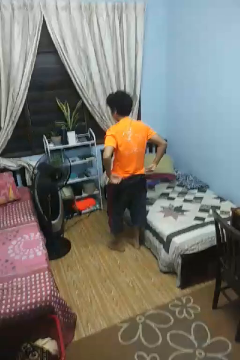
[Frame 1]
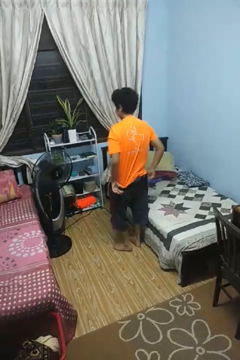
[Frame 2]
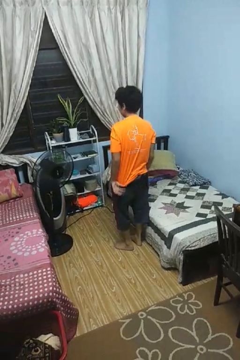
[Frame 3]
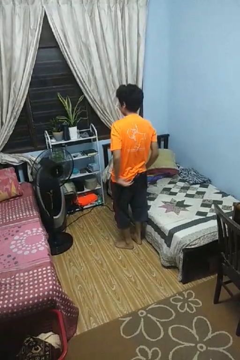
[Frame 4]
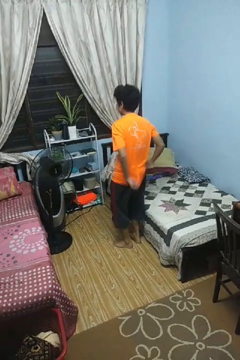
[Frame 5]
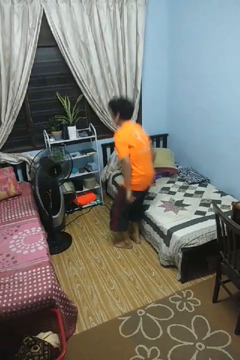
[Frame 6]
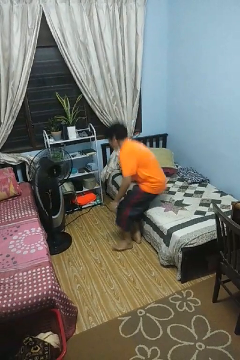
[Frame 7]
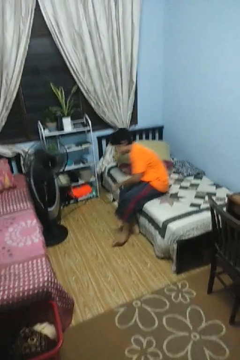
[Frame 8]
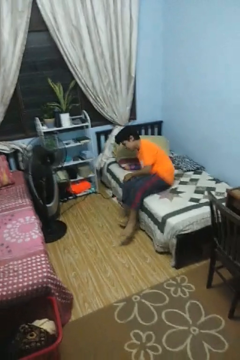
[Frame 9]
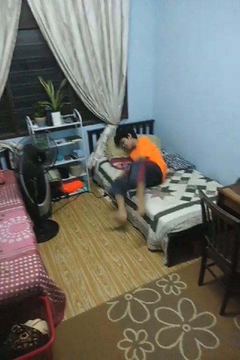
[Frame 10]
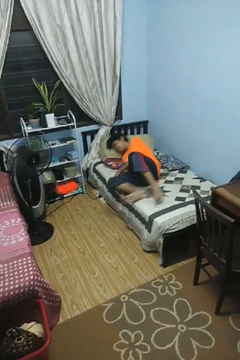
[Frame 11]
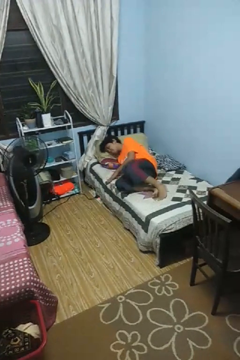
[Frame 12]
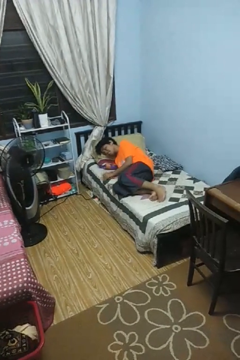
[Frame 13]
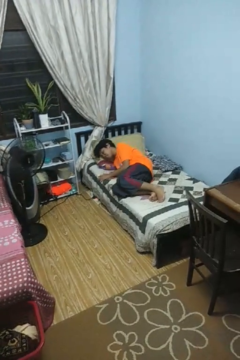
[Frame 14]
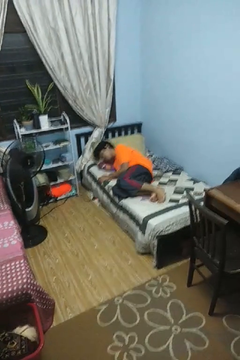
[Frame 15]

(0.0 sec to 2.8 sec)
person lies down on bed

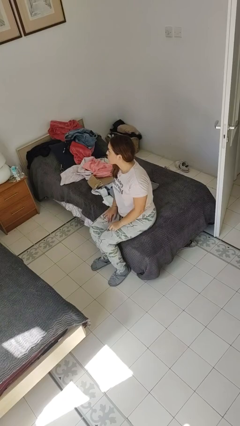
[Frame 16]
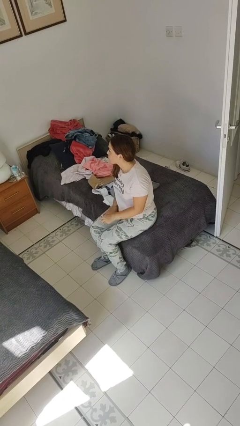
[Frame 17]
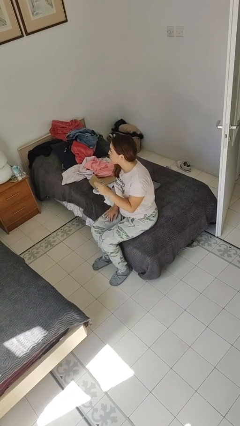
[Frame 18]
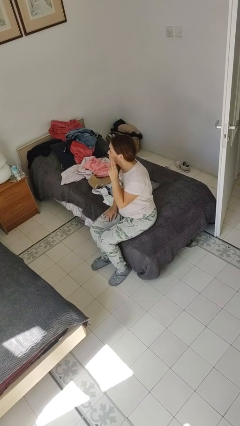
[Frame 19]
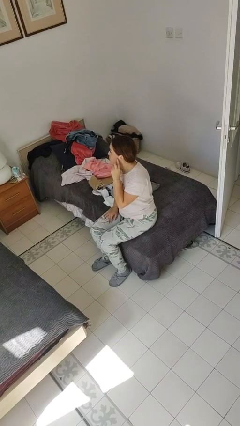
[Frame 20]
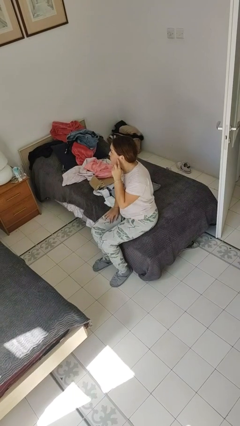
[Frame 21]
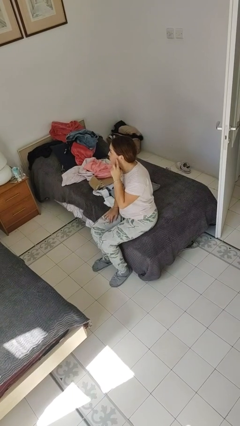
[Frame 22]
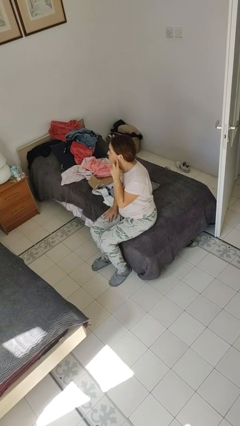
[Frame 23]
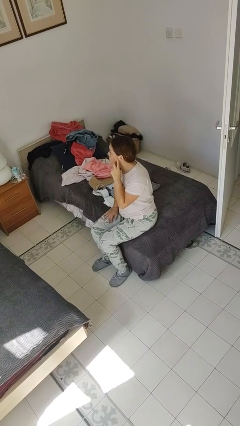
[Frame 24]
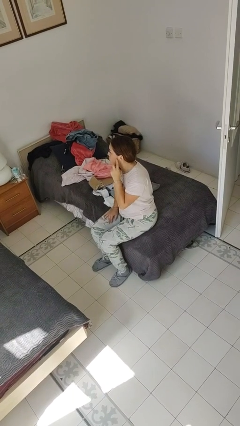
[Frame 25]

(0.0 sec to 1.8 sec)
person gestures listen closely

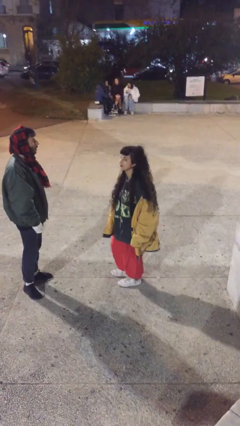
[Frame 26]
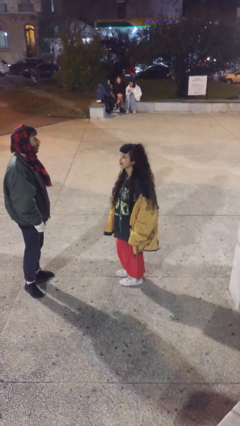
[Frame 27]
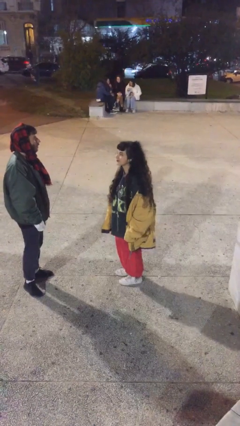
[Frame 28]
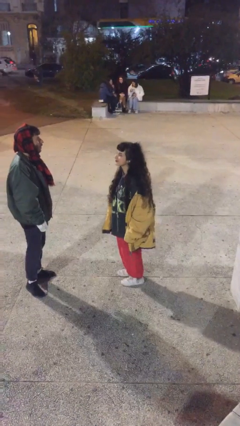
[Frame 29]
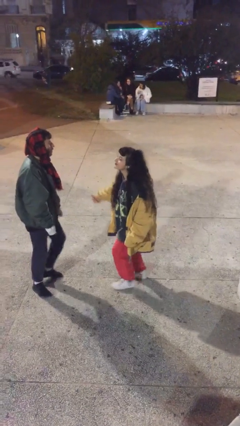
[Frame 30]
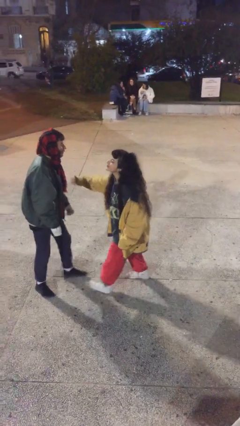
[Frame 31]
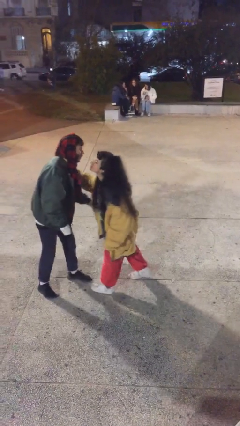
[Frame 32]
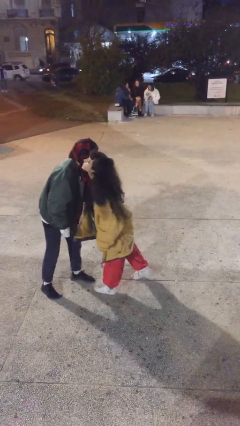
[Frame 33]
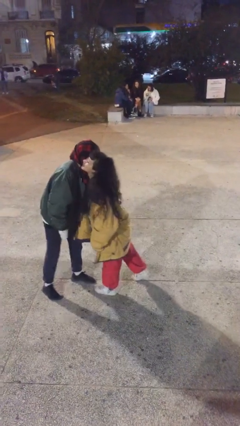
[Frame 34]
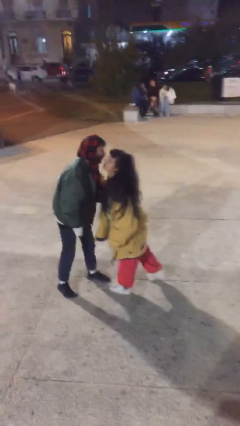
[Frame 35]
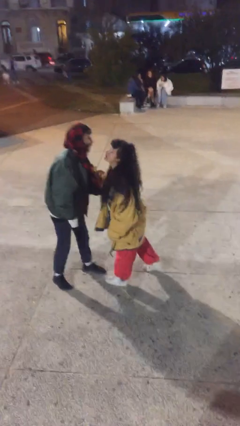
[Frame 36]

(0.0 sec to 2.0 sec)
person kisses cheek of person

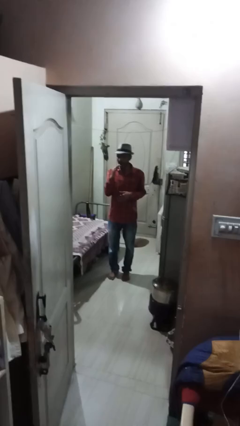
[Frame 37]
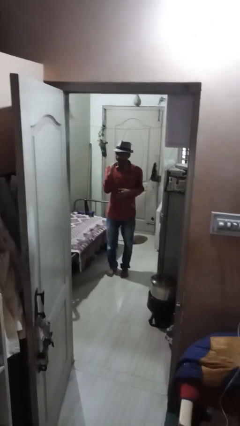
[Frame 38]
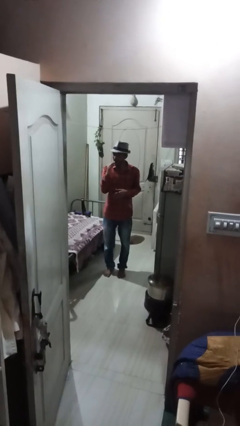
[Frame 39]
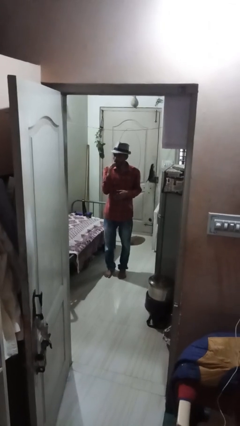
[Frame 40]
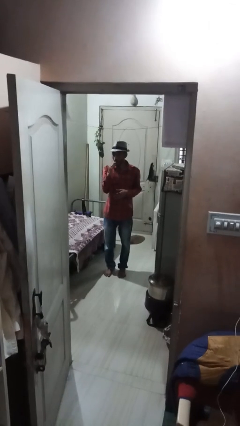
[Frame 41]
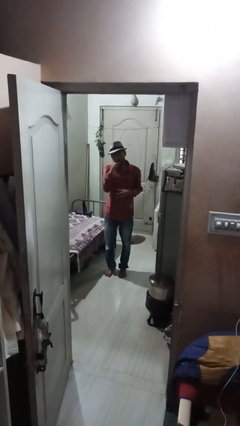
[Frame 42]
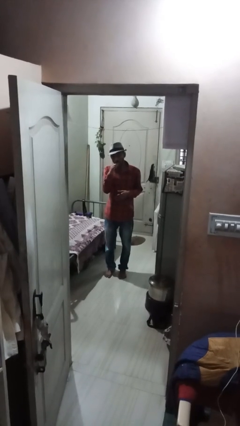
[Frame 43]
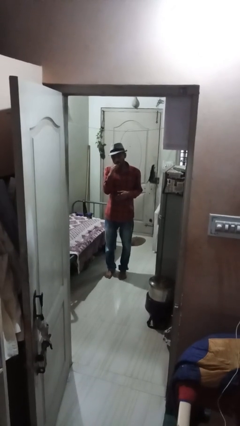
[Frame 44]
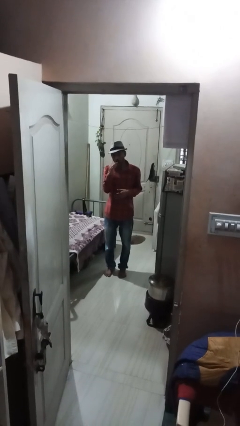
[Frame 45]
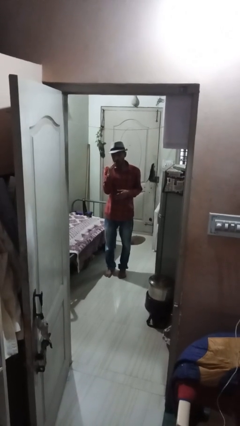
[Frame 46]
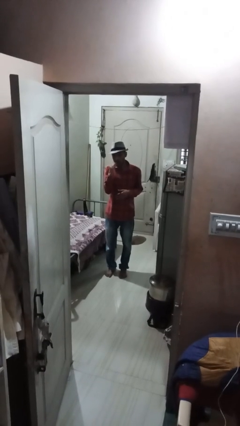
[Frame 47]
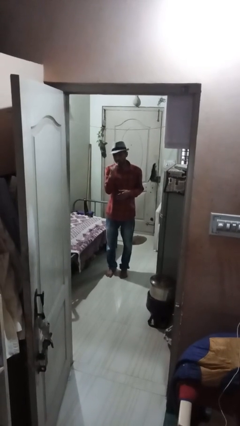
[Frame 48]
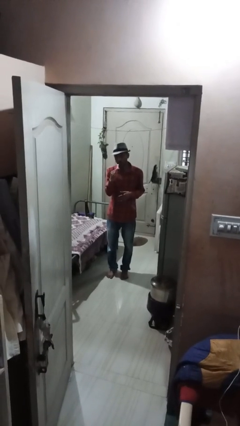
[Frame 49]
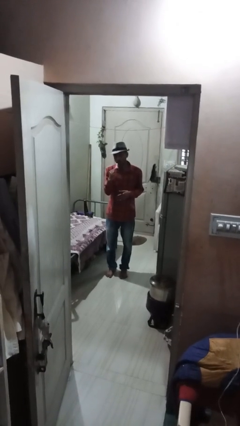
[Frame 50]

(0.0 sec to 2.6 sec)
person brushes teeth

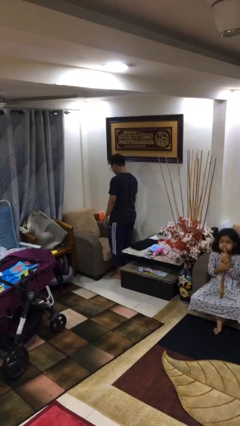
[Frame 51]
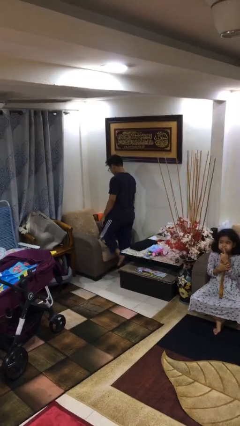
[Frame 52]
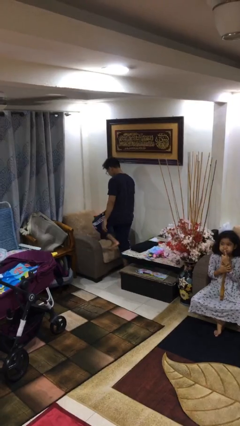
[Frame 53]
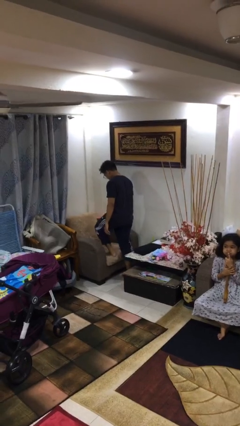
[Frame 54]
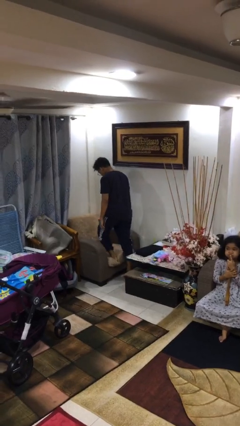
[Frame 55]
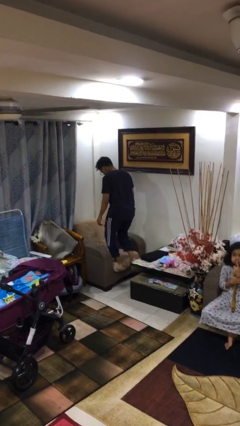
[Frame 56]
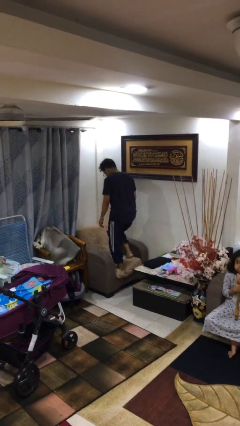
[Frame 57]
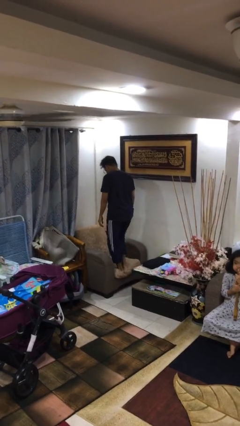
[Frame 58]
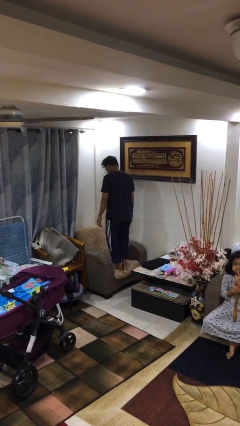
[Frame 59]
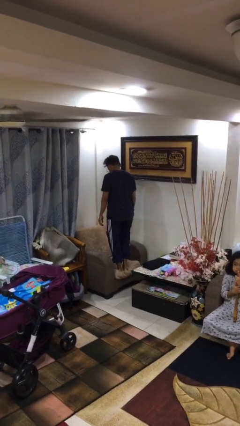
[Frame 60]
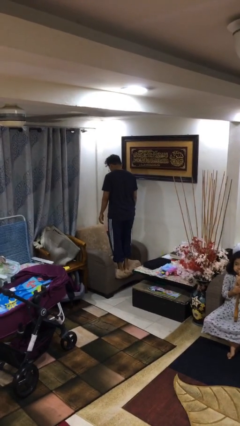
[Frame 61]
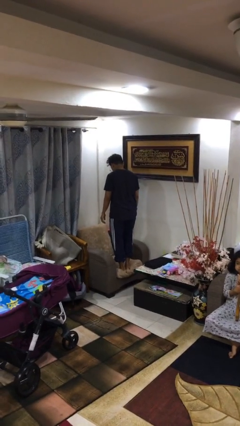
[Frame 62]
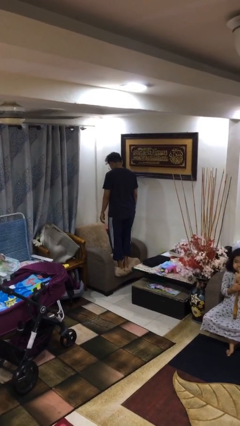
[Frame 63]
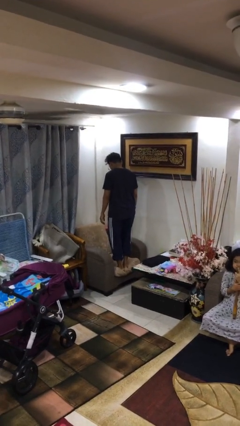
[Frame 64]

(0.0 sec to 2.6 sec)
person climbs on couch

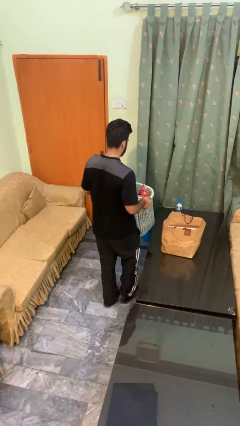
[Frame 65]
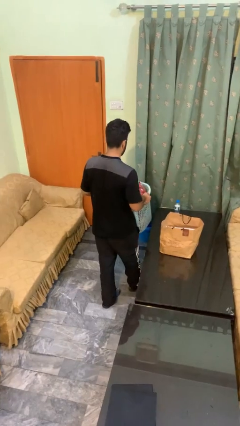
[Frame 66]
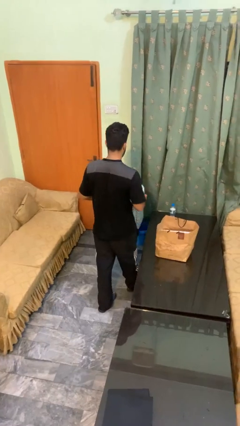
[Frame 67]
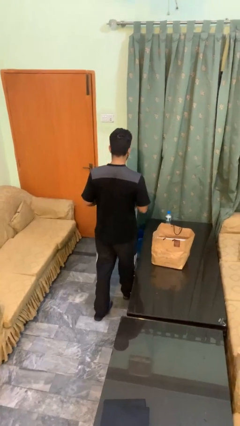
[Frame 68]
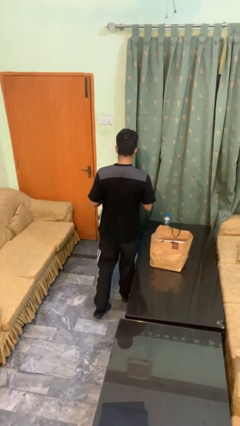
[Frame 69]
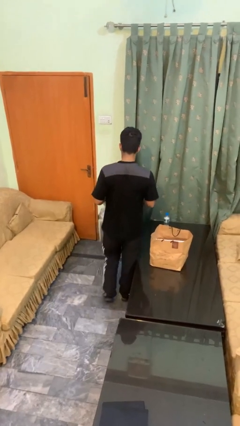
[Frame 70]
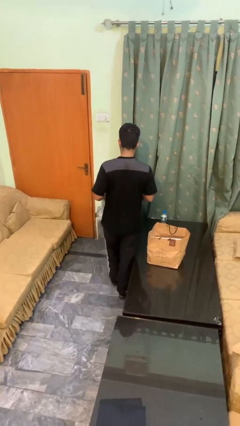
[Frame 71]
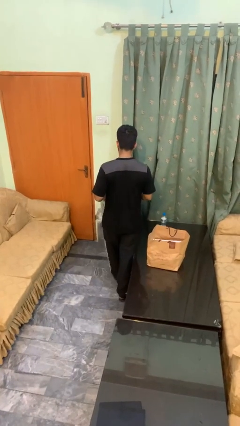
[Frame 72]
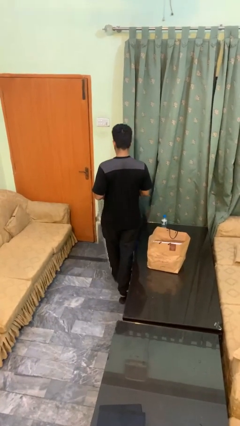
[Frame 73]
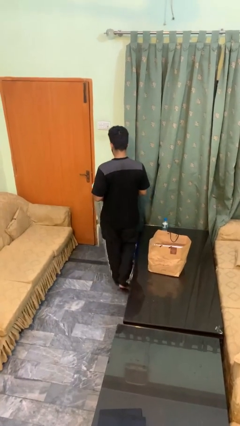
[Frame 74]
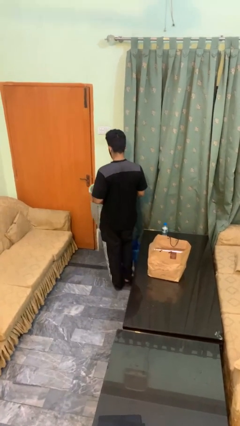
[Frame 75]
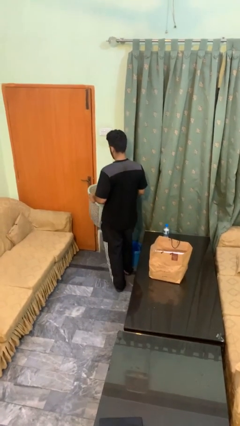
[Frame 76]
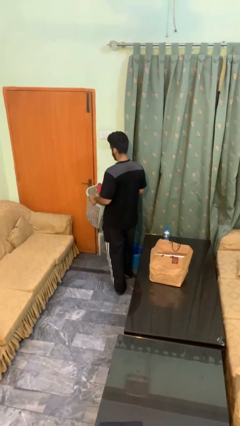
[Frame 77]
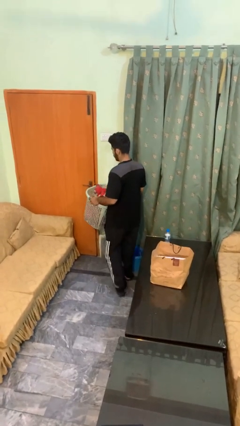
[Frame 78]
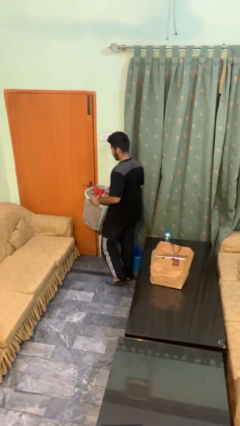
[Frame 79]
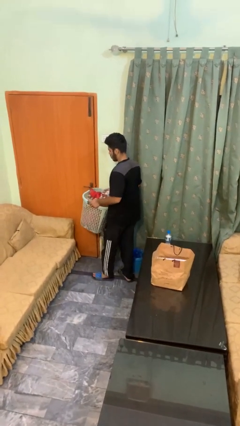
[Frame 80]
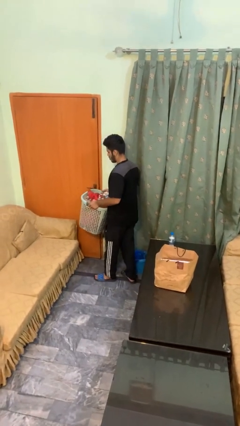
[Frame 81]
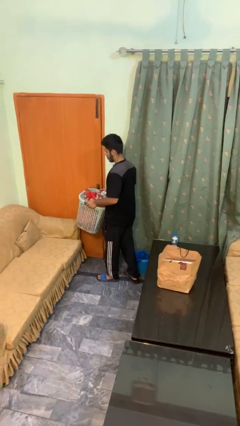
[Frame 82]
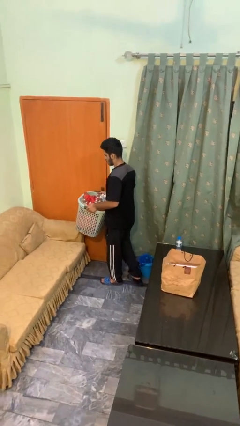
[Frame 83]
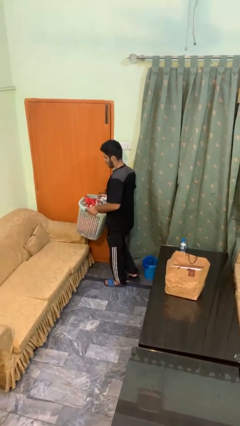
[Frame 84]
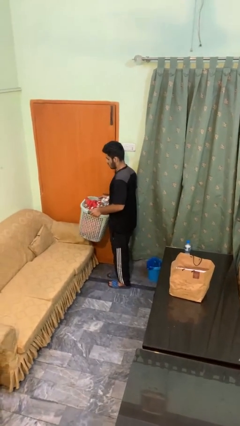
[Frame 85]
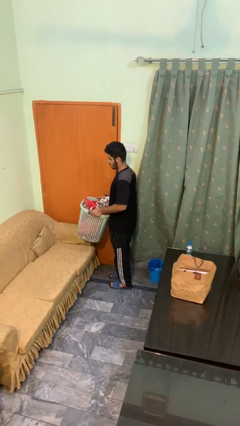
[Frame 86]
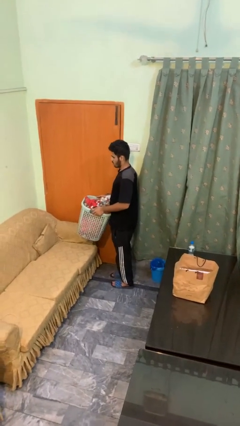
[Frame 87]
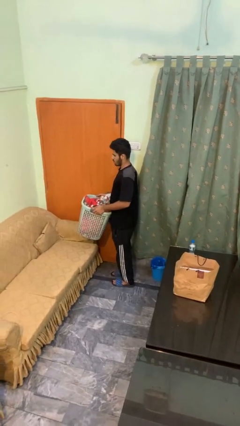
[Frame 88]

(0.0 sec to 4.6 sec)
person carries laundry basket

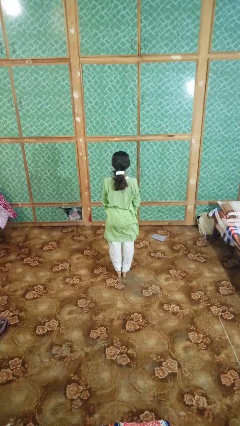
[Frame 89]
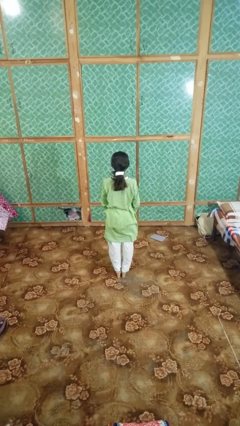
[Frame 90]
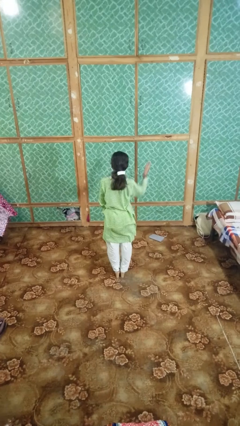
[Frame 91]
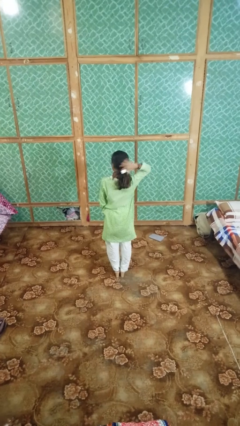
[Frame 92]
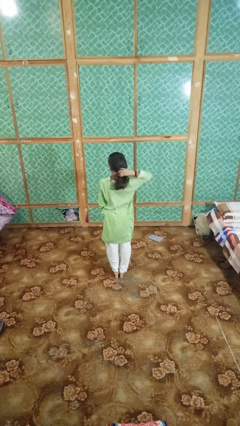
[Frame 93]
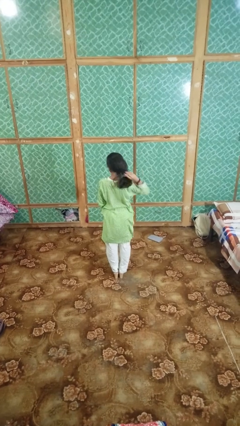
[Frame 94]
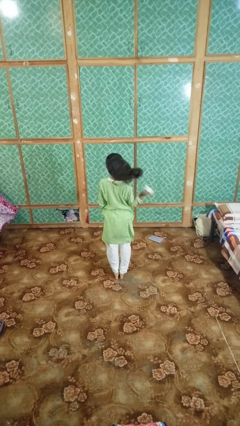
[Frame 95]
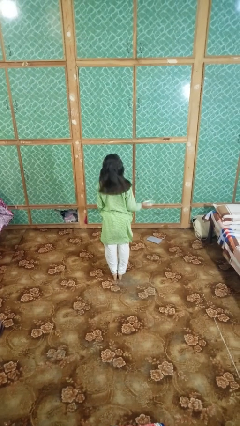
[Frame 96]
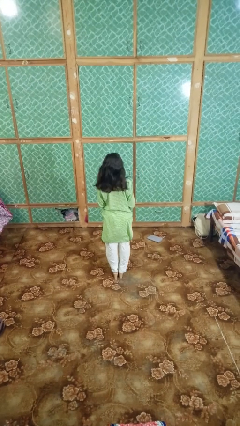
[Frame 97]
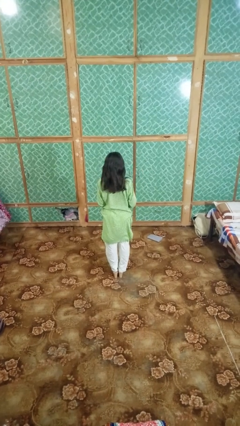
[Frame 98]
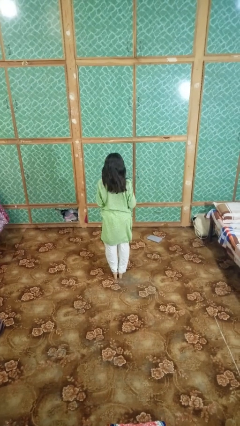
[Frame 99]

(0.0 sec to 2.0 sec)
person takes off hairtie
